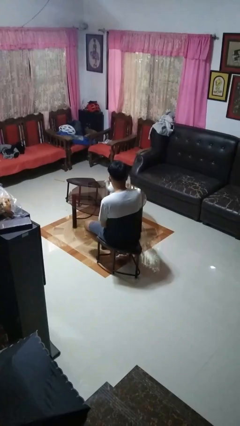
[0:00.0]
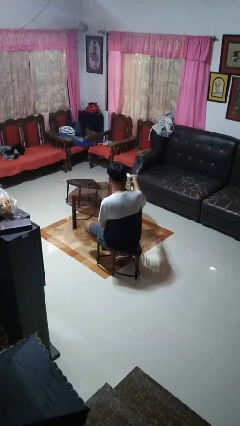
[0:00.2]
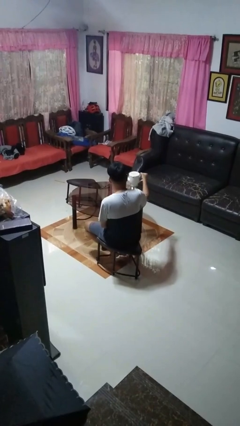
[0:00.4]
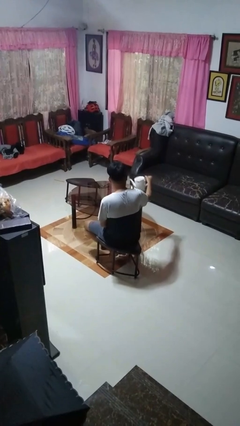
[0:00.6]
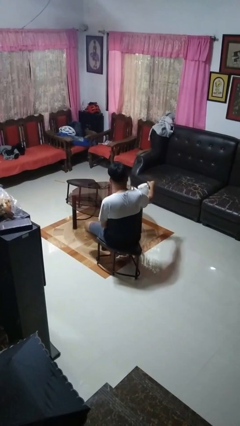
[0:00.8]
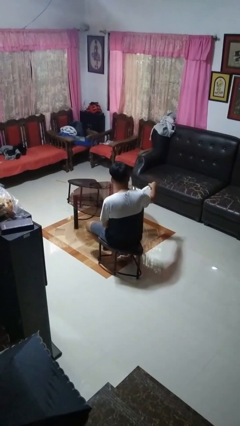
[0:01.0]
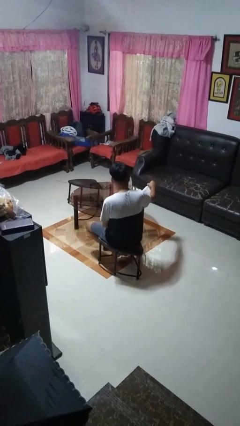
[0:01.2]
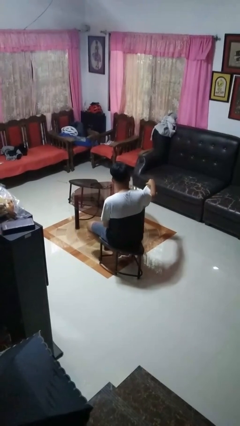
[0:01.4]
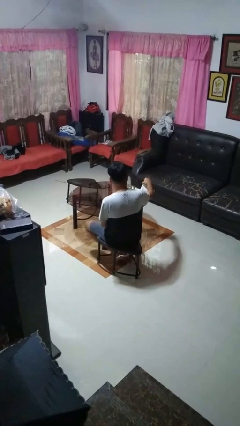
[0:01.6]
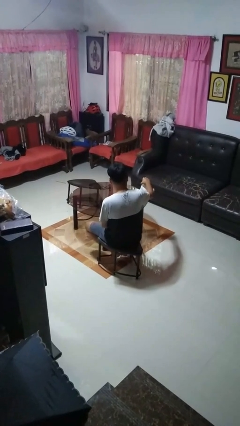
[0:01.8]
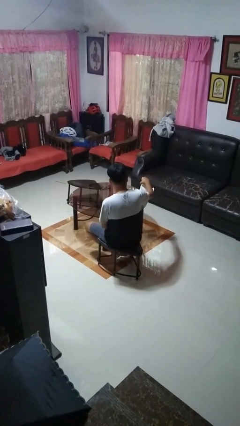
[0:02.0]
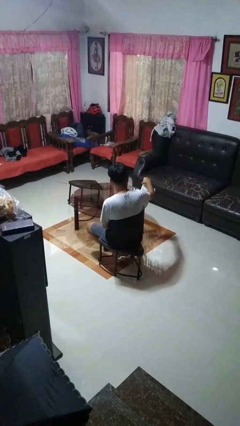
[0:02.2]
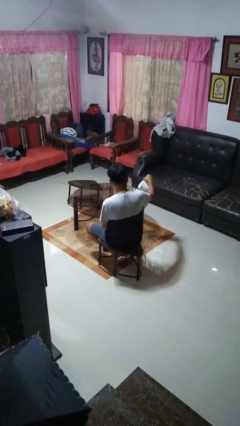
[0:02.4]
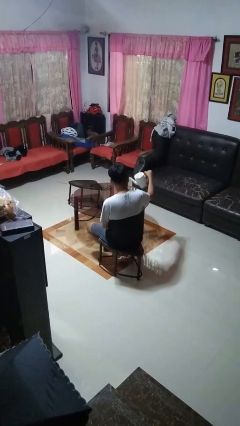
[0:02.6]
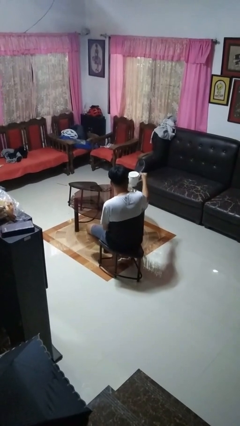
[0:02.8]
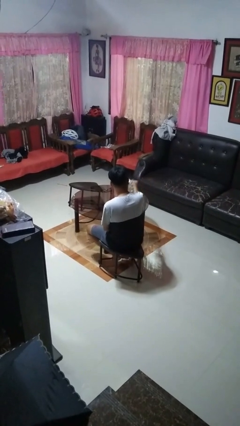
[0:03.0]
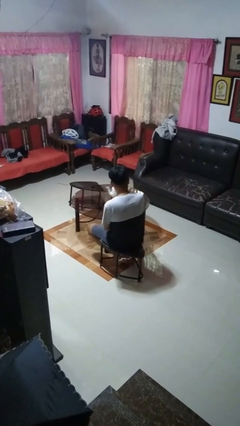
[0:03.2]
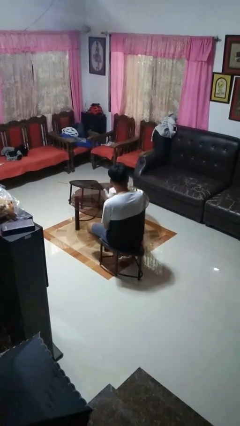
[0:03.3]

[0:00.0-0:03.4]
person pours coffee into mug

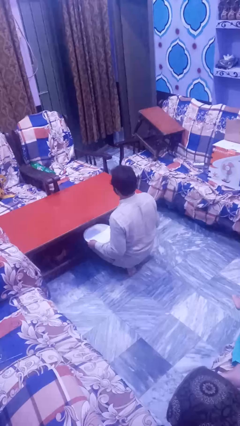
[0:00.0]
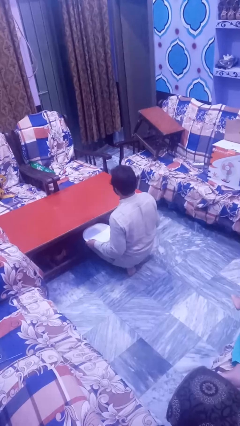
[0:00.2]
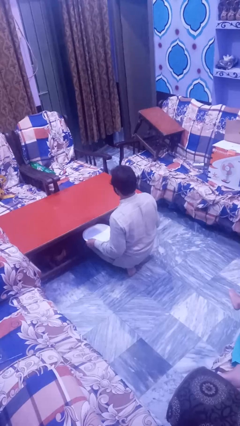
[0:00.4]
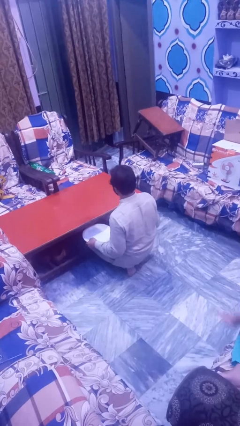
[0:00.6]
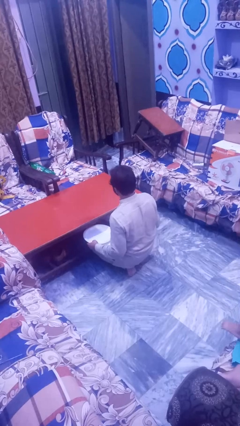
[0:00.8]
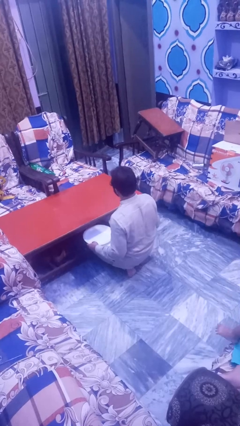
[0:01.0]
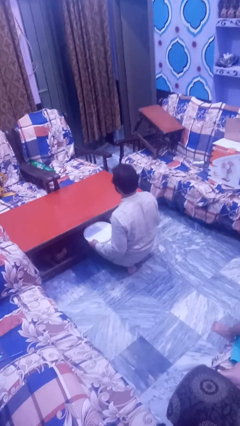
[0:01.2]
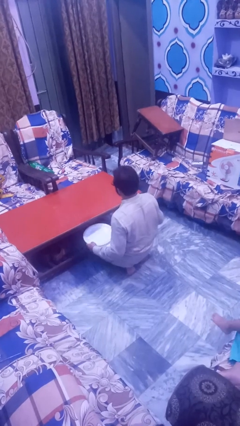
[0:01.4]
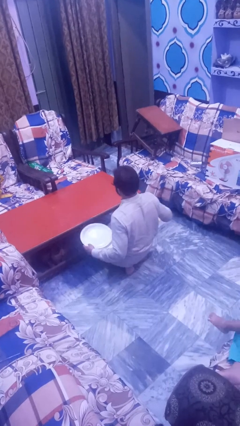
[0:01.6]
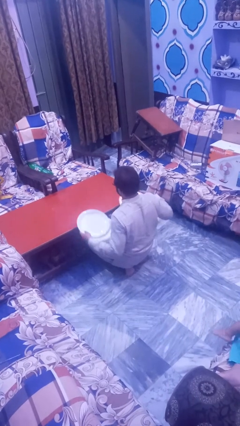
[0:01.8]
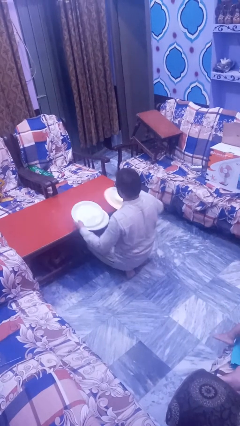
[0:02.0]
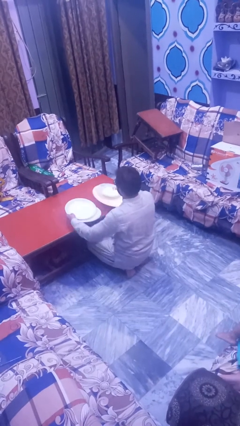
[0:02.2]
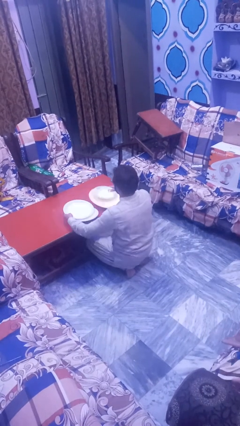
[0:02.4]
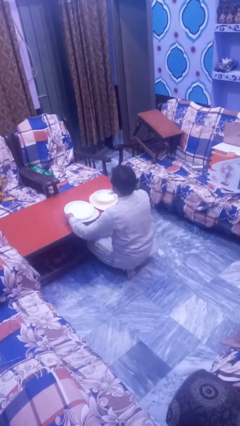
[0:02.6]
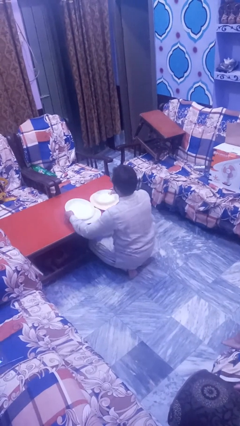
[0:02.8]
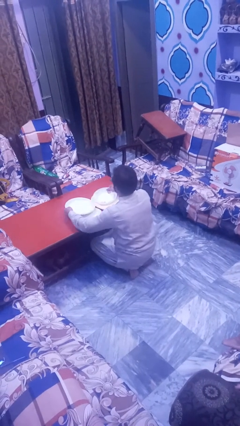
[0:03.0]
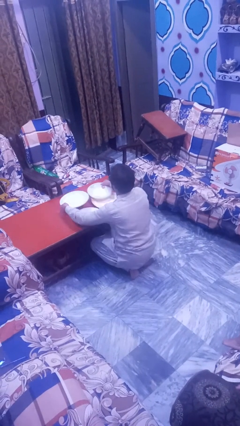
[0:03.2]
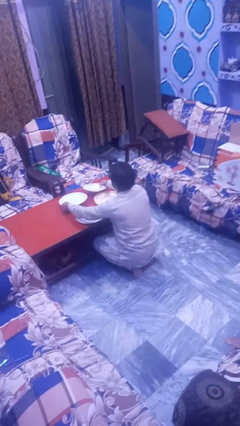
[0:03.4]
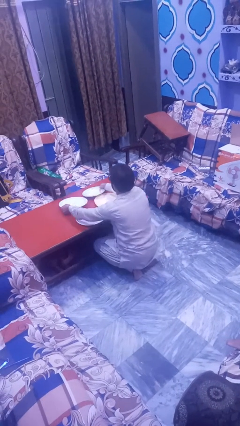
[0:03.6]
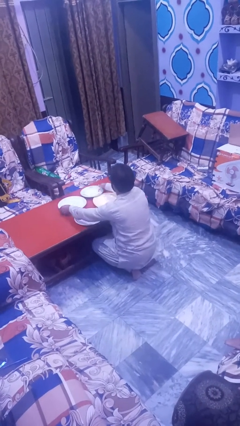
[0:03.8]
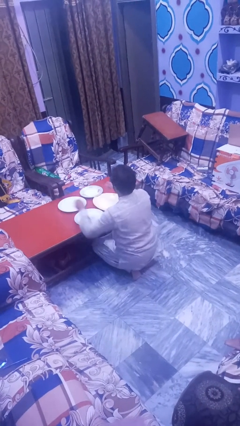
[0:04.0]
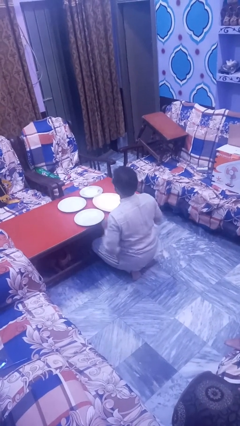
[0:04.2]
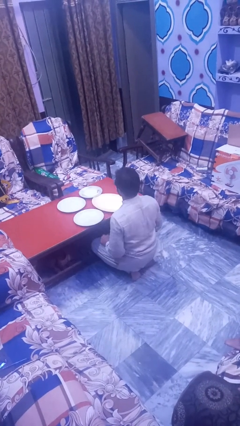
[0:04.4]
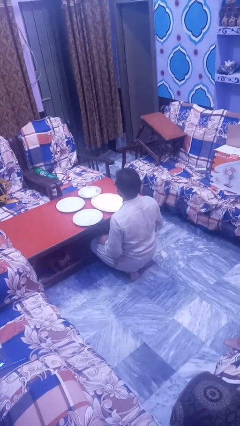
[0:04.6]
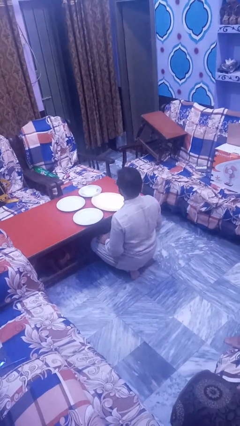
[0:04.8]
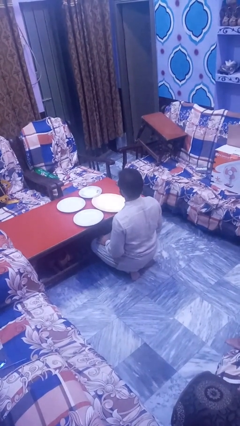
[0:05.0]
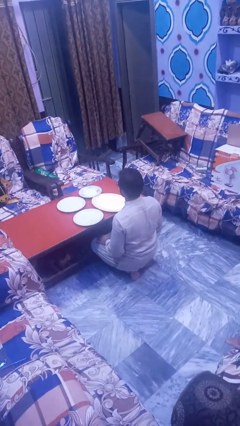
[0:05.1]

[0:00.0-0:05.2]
person sets table

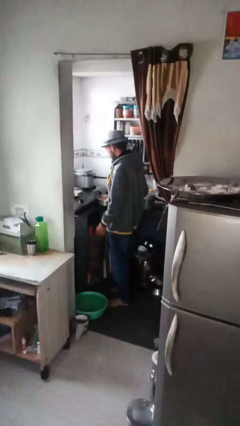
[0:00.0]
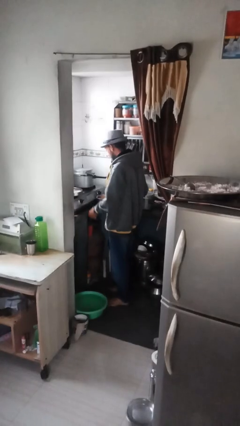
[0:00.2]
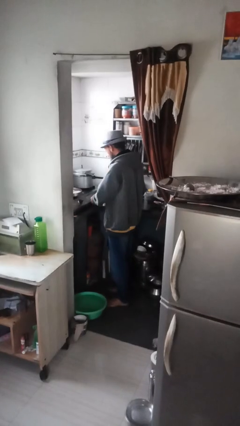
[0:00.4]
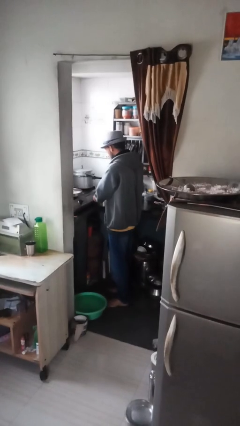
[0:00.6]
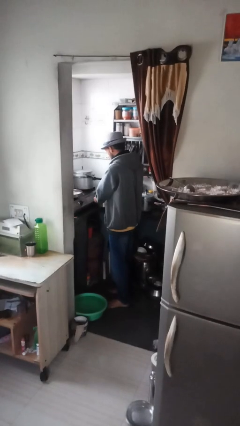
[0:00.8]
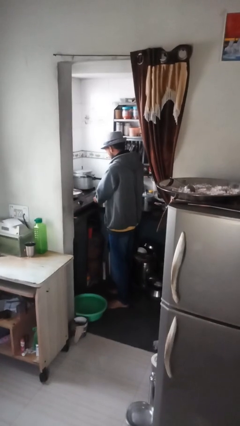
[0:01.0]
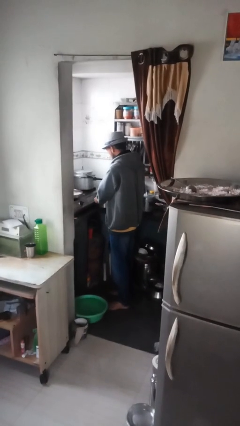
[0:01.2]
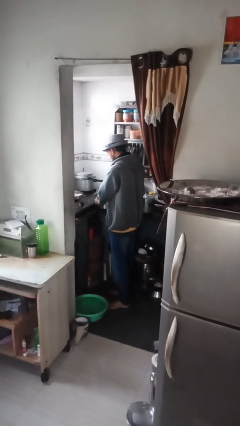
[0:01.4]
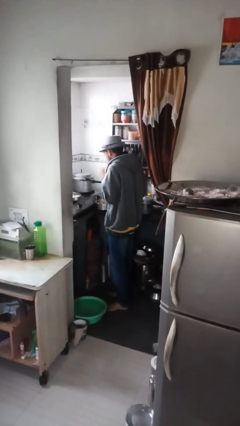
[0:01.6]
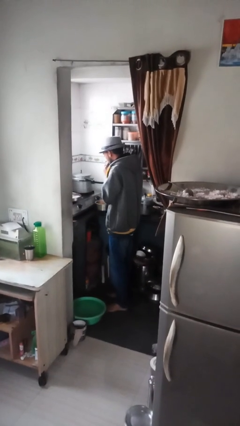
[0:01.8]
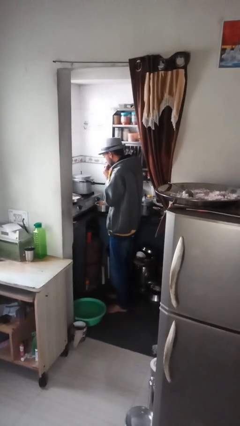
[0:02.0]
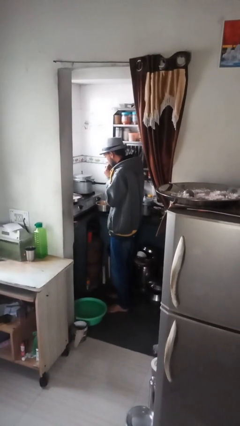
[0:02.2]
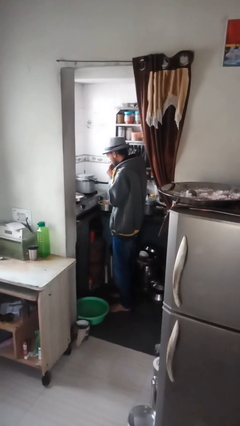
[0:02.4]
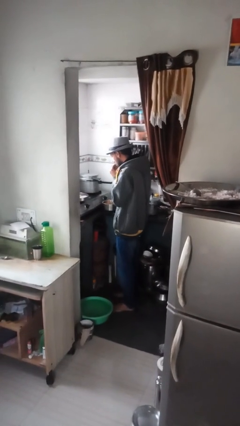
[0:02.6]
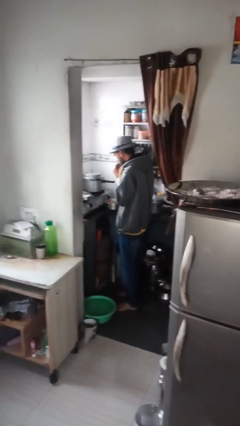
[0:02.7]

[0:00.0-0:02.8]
person burns hand

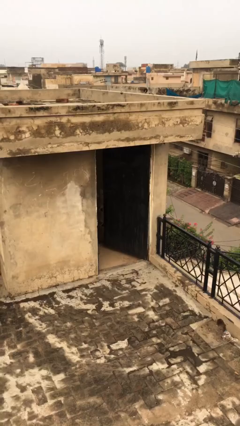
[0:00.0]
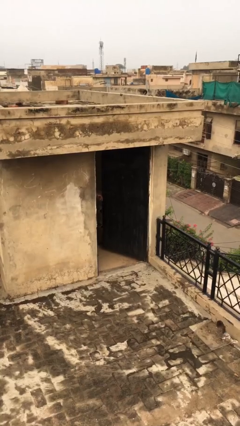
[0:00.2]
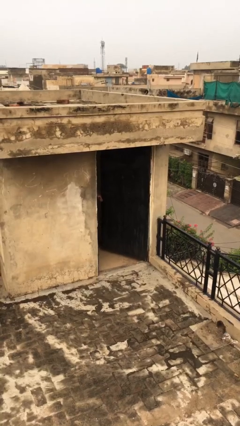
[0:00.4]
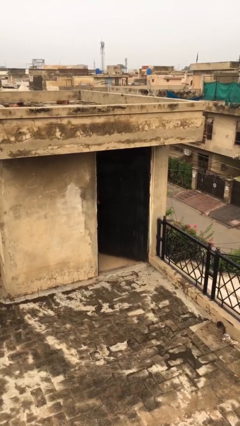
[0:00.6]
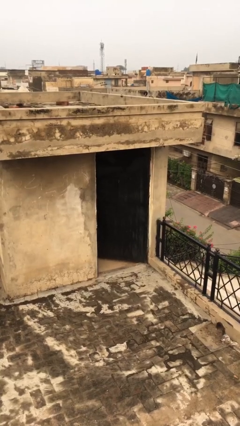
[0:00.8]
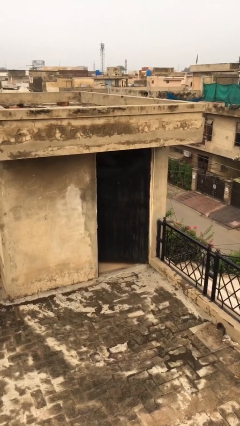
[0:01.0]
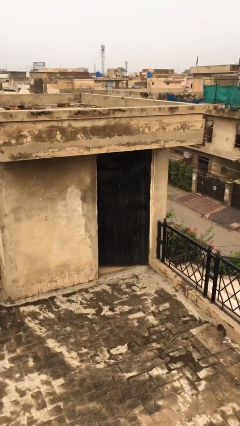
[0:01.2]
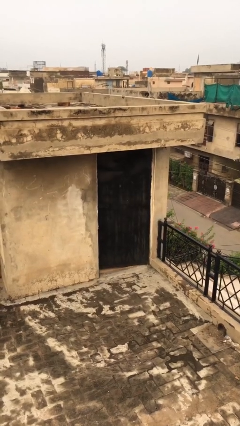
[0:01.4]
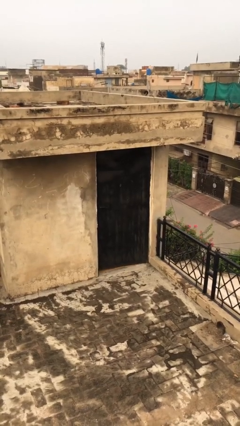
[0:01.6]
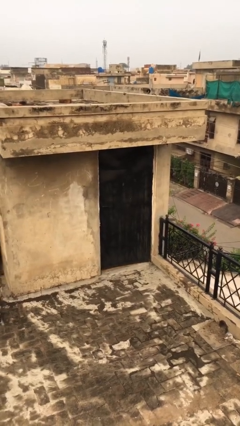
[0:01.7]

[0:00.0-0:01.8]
person closes facility door

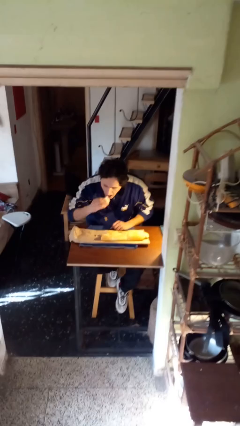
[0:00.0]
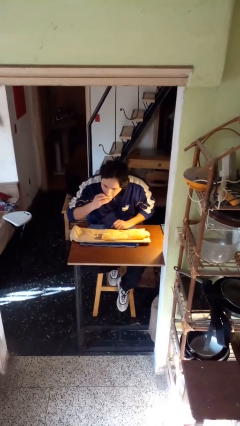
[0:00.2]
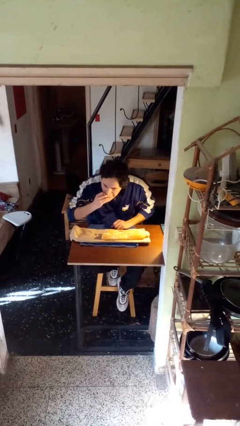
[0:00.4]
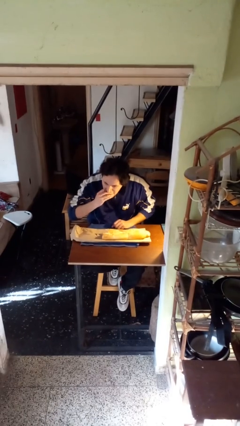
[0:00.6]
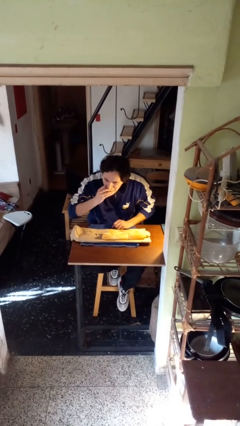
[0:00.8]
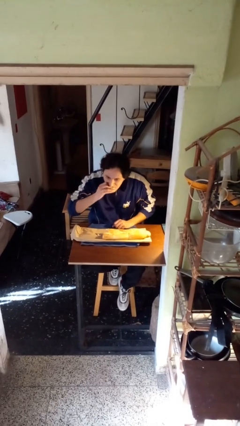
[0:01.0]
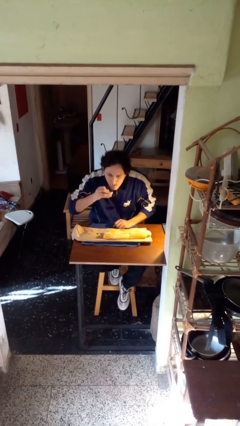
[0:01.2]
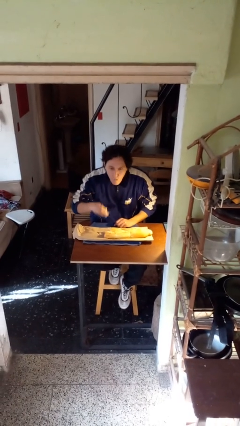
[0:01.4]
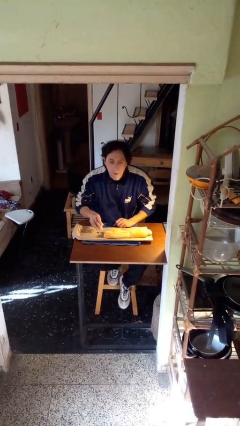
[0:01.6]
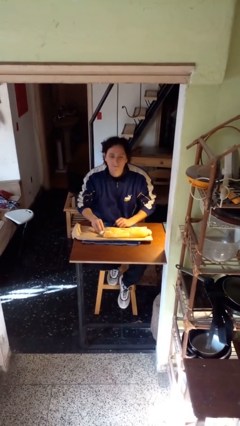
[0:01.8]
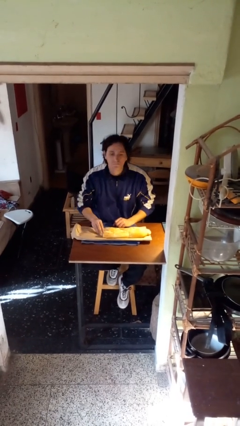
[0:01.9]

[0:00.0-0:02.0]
person eats with hands

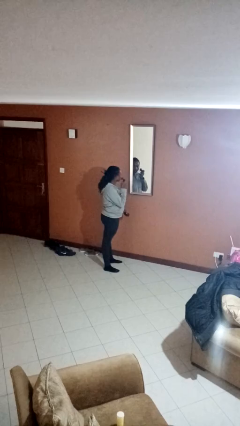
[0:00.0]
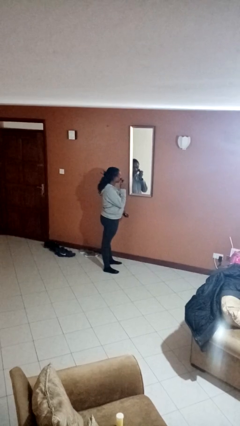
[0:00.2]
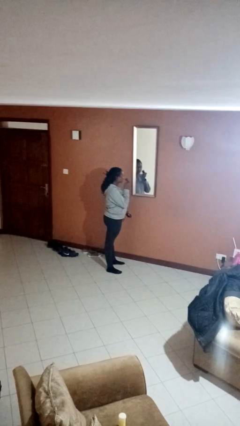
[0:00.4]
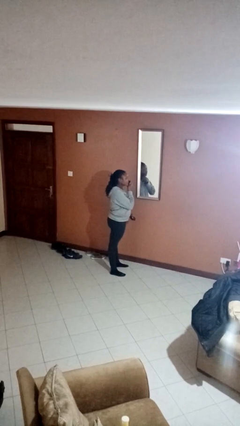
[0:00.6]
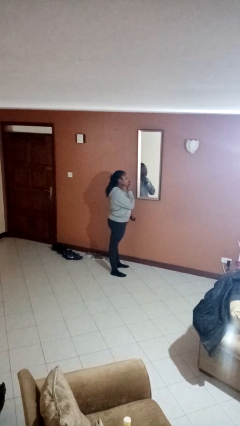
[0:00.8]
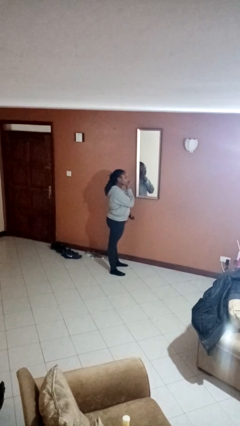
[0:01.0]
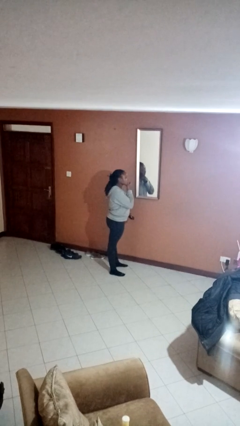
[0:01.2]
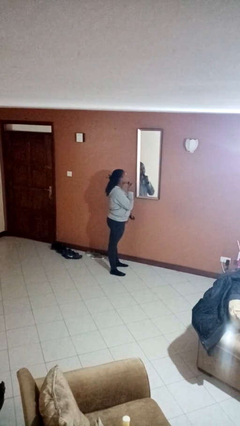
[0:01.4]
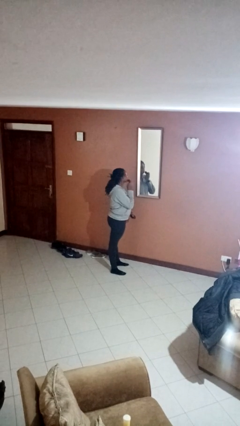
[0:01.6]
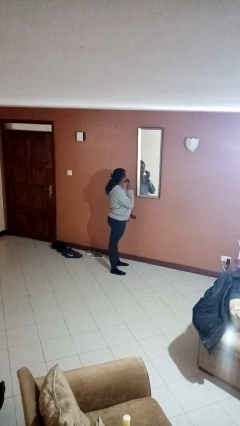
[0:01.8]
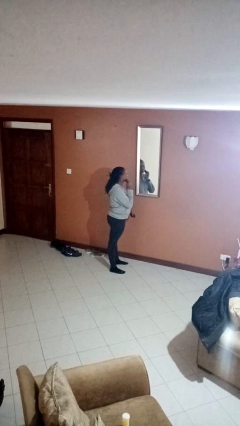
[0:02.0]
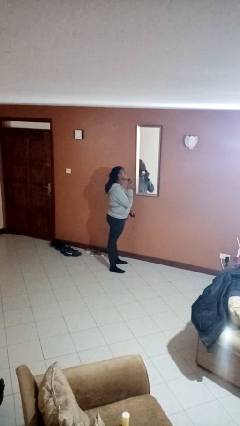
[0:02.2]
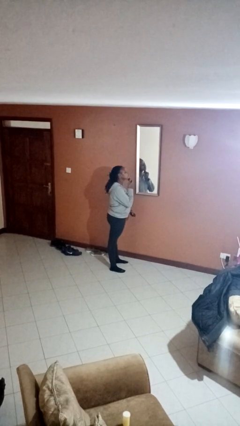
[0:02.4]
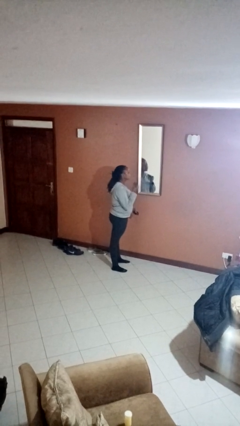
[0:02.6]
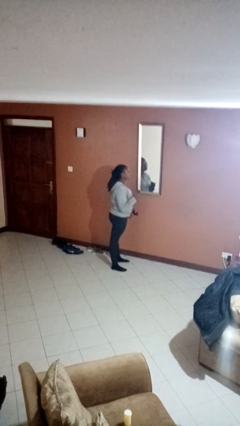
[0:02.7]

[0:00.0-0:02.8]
person applies foundation makeup
